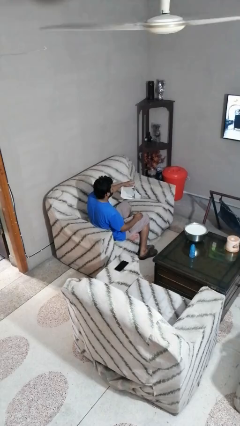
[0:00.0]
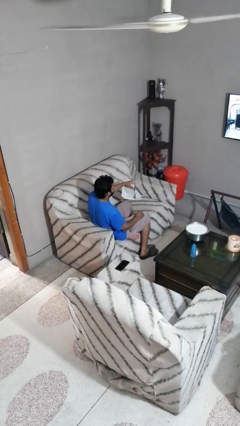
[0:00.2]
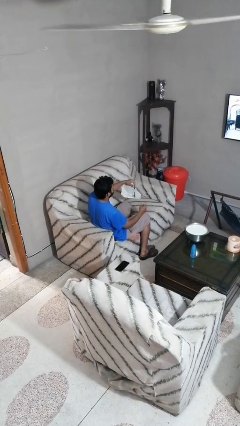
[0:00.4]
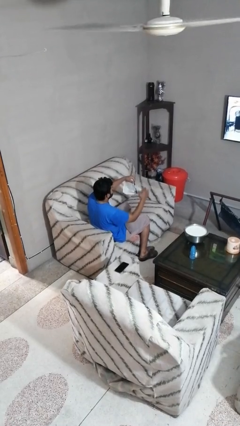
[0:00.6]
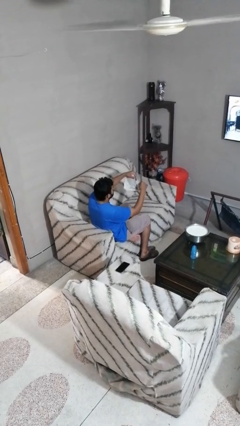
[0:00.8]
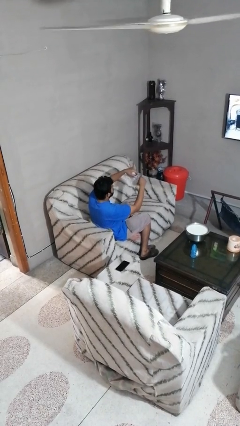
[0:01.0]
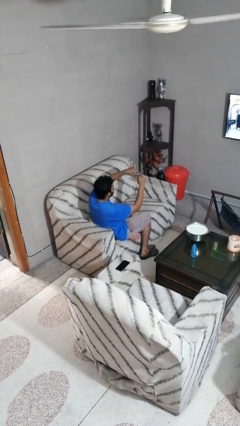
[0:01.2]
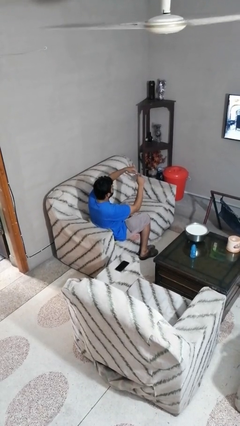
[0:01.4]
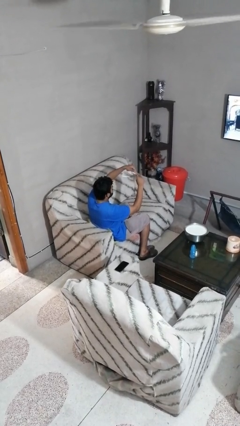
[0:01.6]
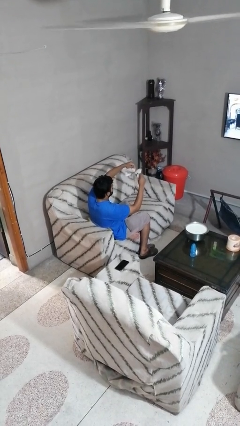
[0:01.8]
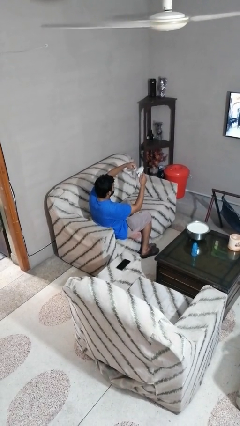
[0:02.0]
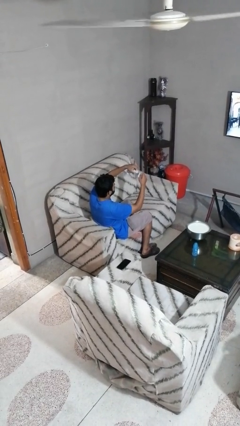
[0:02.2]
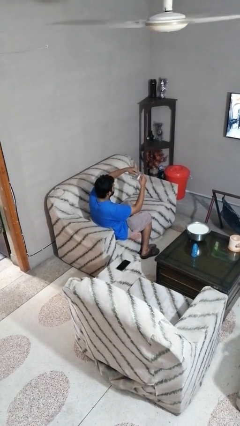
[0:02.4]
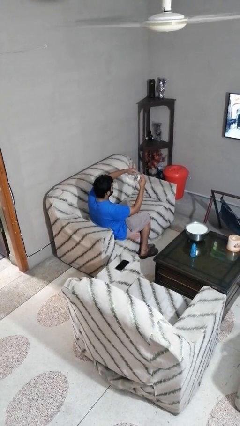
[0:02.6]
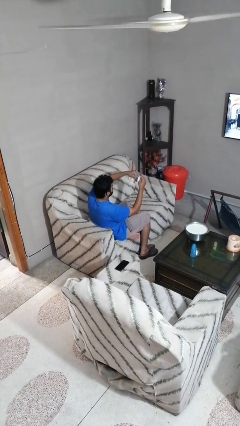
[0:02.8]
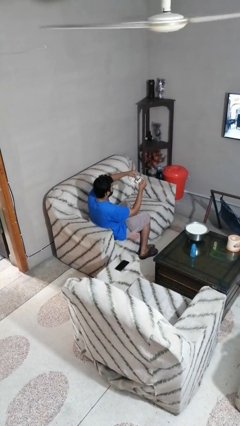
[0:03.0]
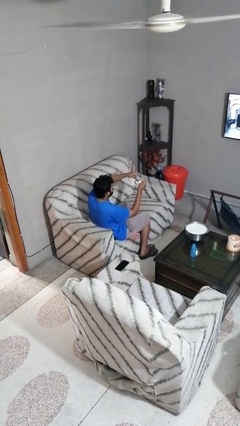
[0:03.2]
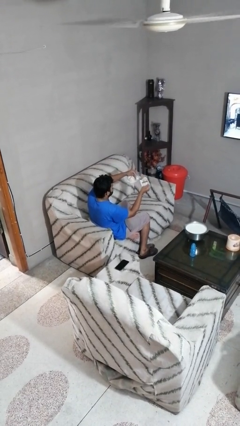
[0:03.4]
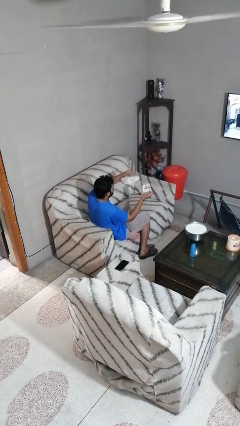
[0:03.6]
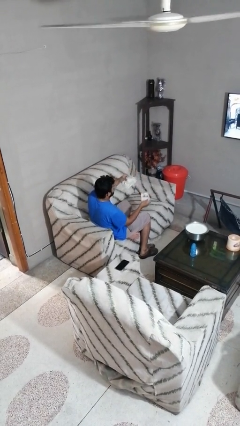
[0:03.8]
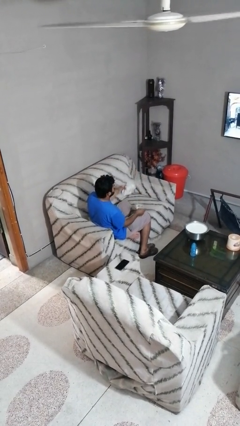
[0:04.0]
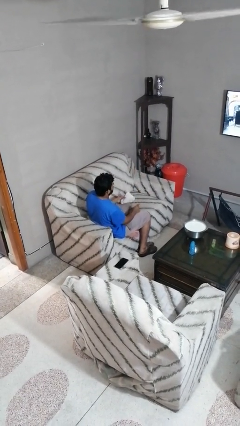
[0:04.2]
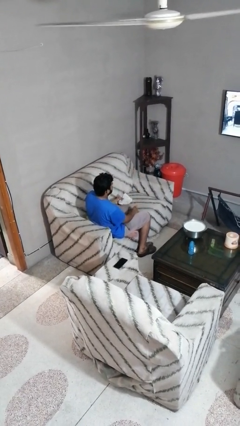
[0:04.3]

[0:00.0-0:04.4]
person tears paper

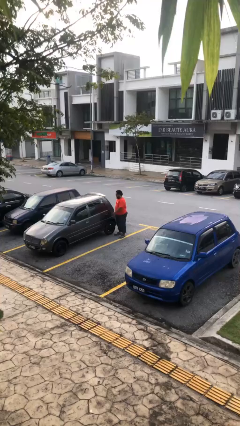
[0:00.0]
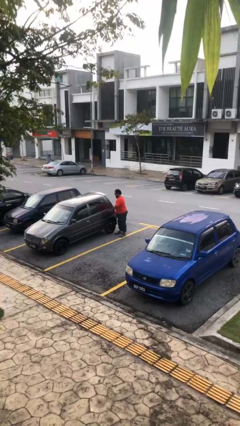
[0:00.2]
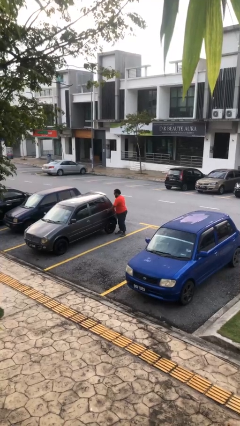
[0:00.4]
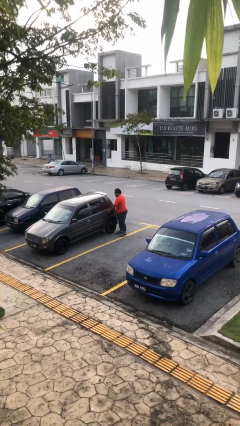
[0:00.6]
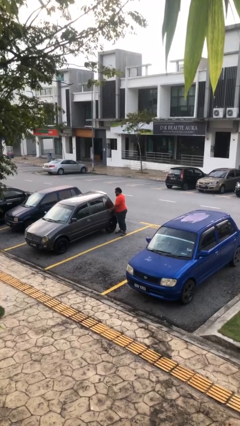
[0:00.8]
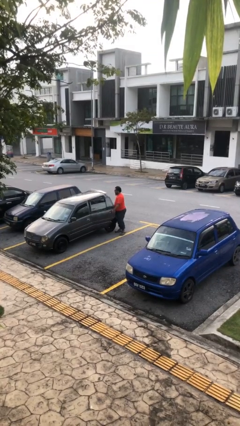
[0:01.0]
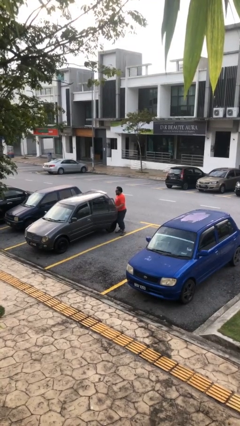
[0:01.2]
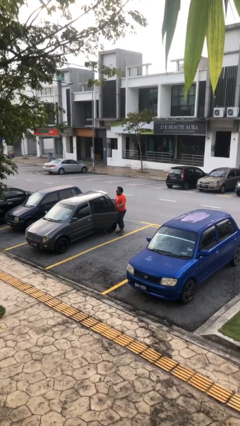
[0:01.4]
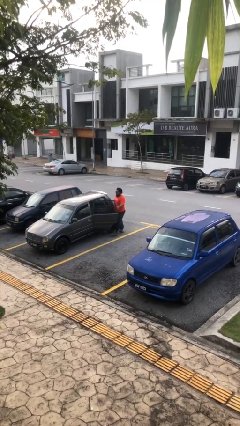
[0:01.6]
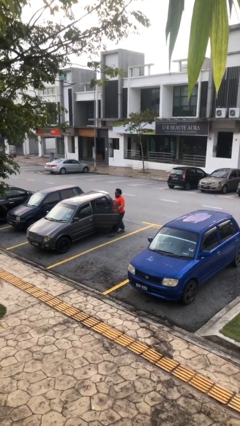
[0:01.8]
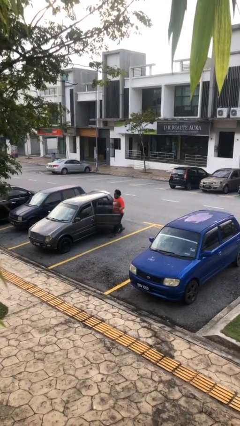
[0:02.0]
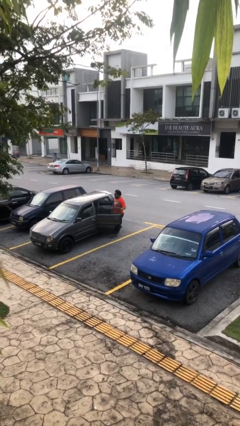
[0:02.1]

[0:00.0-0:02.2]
person opens car door

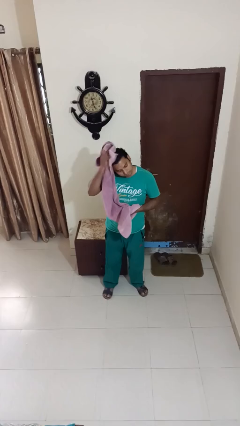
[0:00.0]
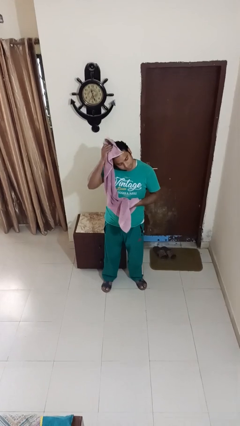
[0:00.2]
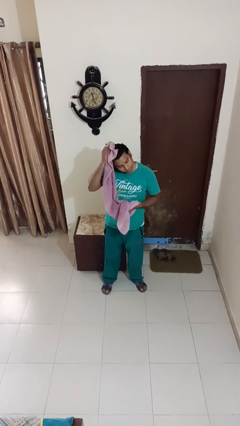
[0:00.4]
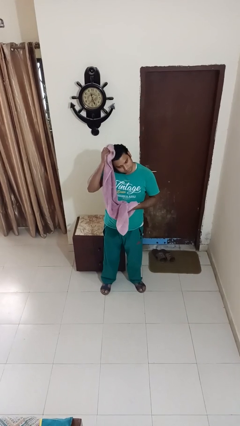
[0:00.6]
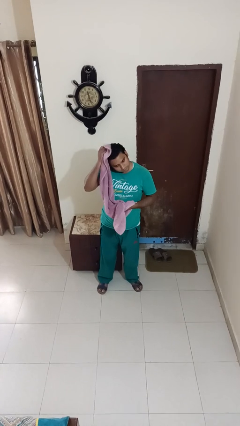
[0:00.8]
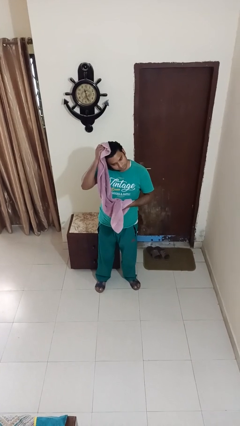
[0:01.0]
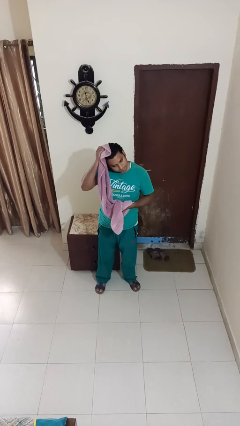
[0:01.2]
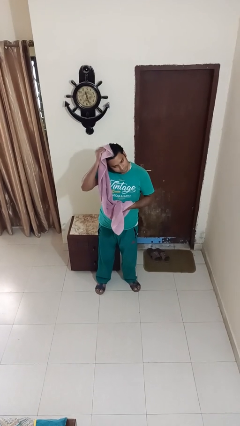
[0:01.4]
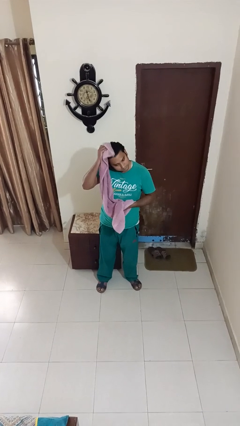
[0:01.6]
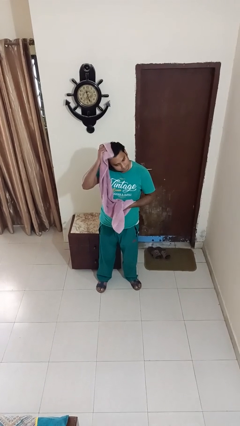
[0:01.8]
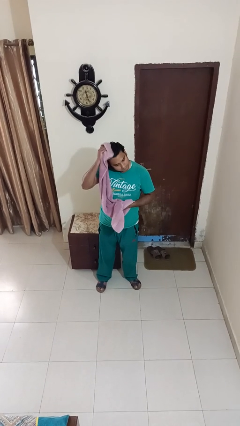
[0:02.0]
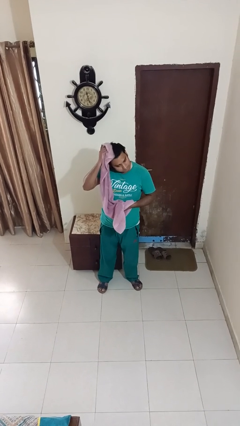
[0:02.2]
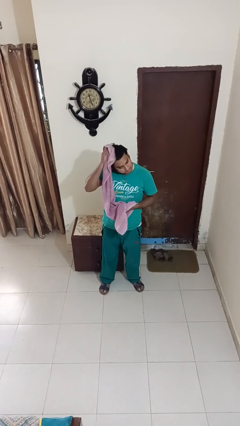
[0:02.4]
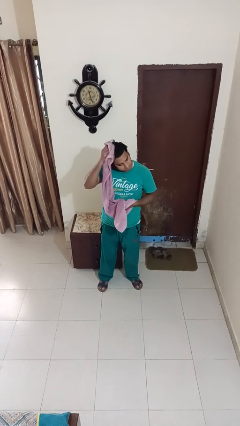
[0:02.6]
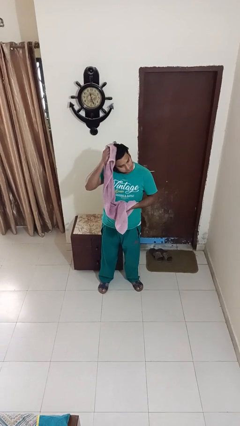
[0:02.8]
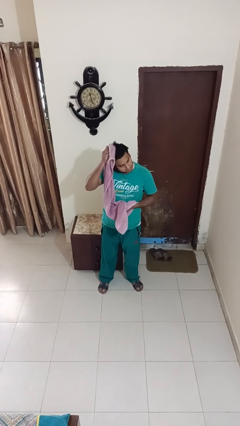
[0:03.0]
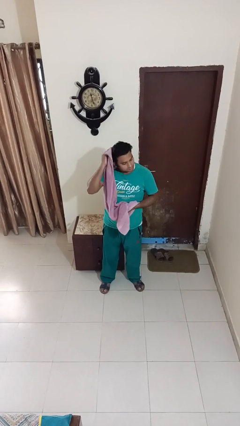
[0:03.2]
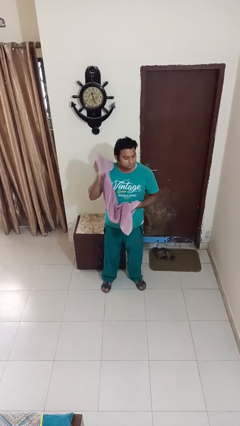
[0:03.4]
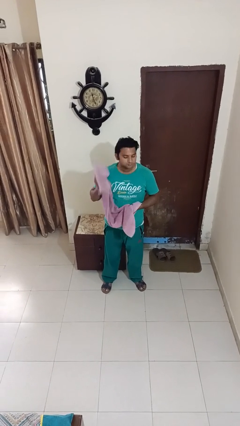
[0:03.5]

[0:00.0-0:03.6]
person dries hair with towel

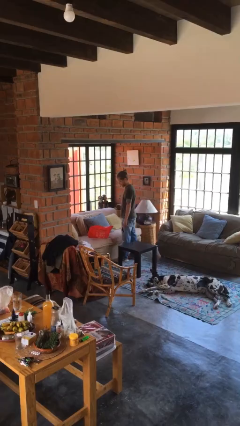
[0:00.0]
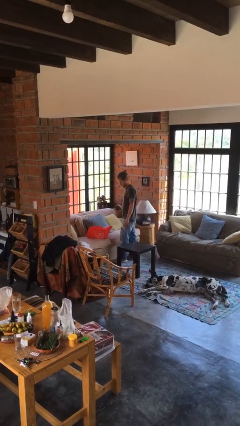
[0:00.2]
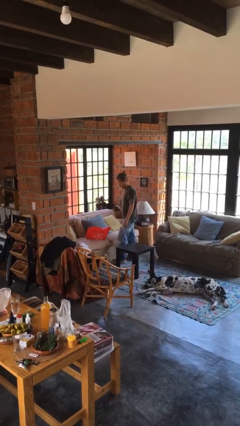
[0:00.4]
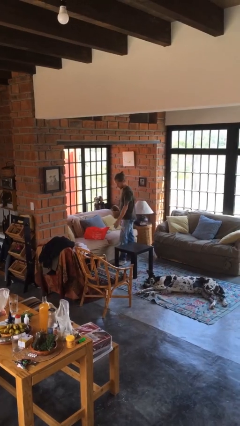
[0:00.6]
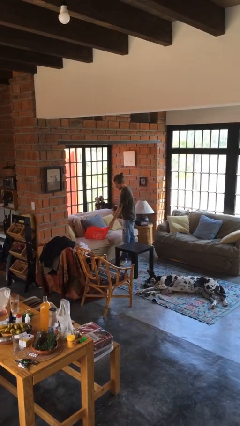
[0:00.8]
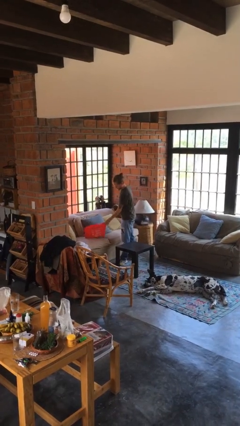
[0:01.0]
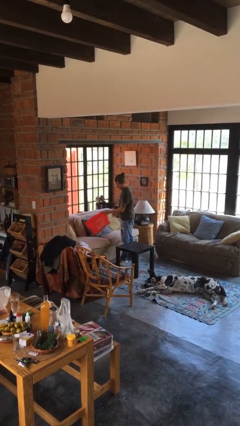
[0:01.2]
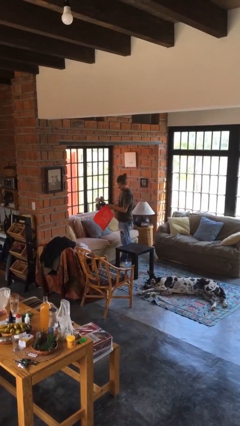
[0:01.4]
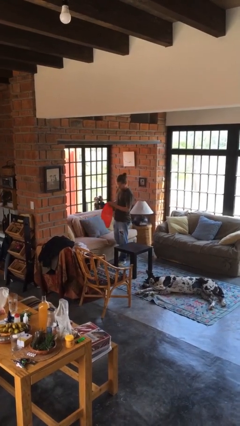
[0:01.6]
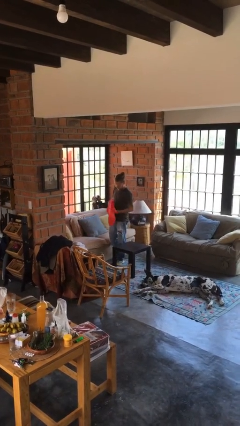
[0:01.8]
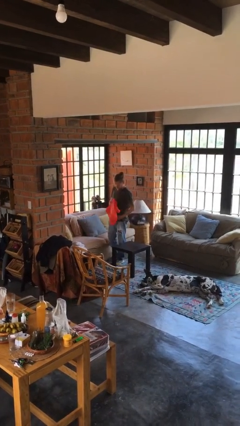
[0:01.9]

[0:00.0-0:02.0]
person picks up object from couch

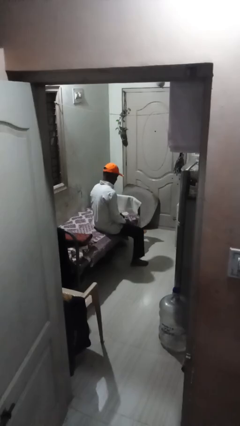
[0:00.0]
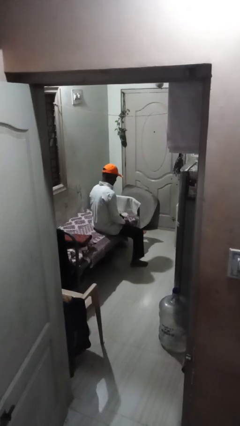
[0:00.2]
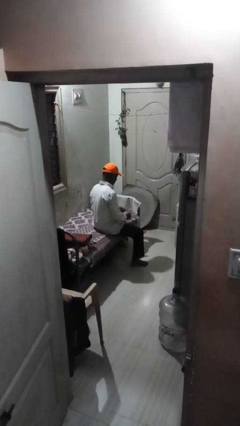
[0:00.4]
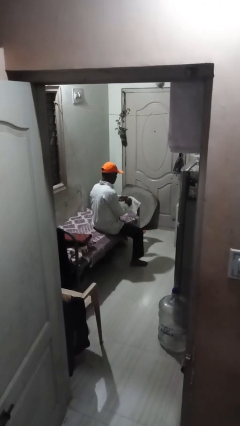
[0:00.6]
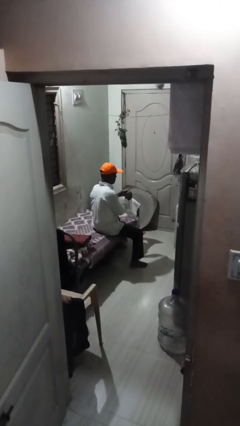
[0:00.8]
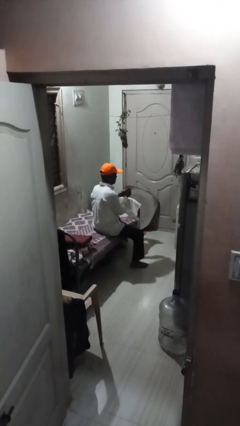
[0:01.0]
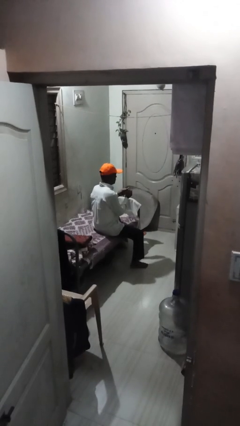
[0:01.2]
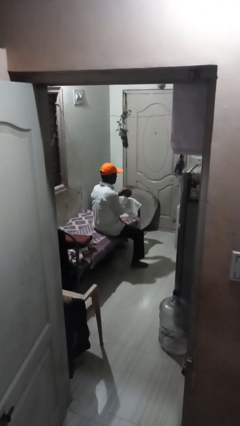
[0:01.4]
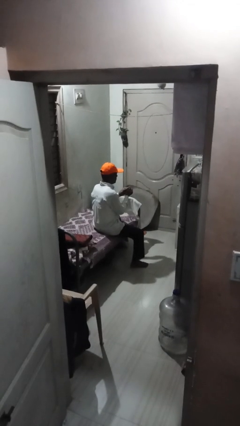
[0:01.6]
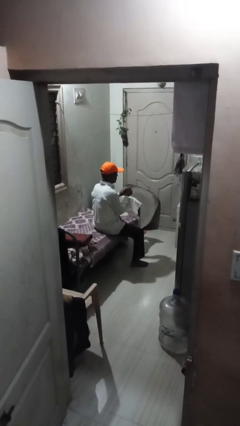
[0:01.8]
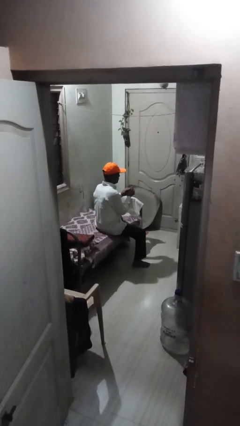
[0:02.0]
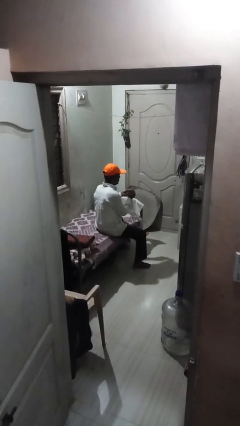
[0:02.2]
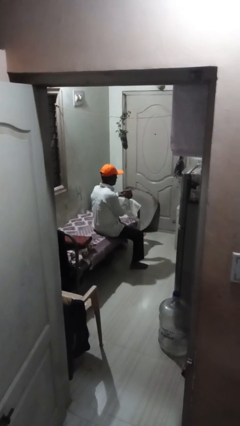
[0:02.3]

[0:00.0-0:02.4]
person files fingernails

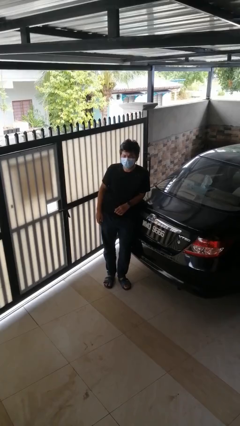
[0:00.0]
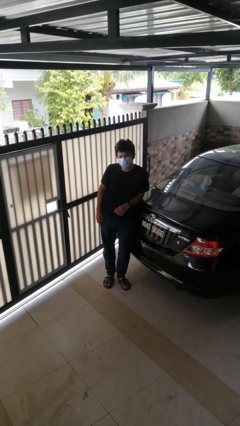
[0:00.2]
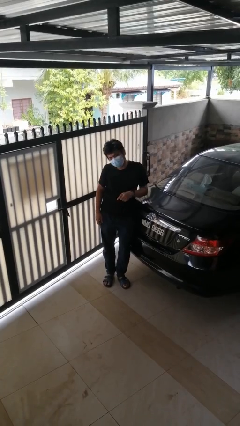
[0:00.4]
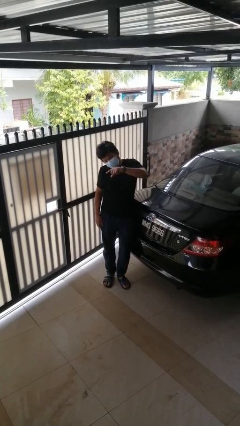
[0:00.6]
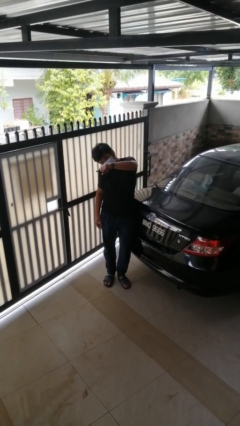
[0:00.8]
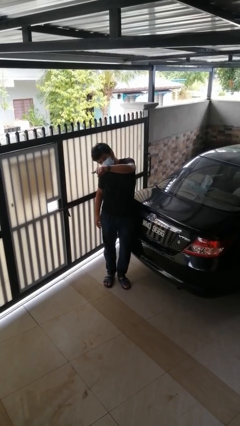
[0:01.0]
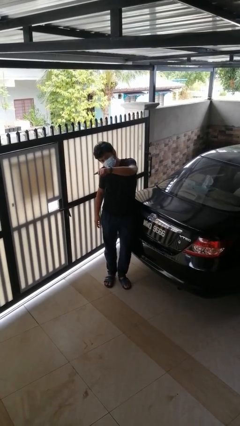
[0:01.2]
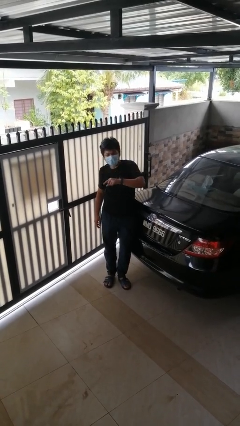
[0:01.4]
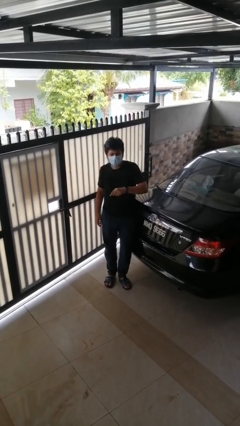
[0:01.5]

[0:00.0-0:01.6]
person points at person

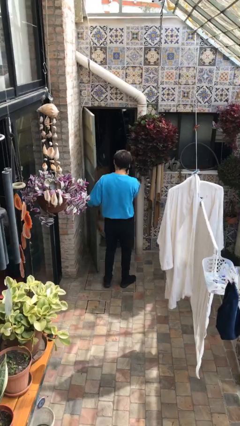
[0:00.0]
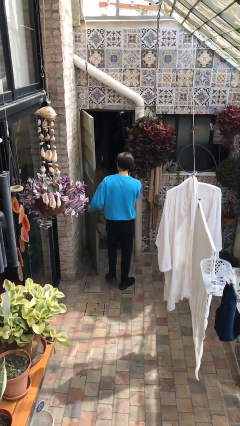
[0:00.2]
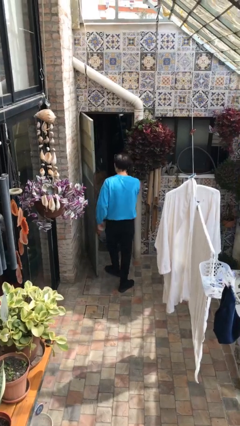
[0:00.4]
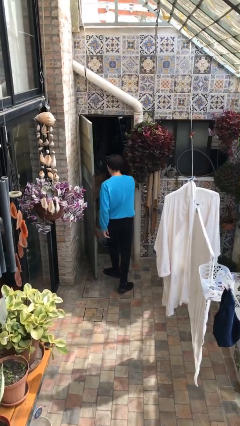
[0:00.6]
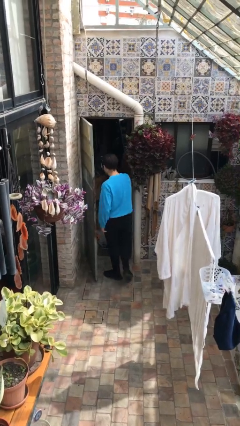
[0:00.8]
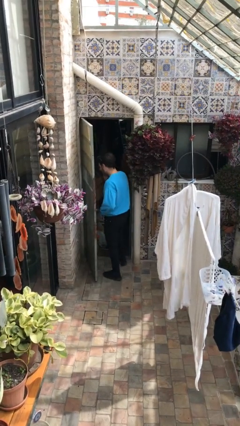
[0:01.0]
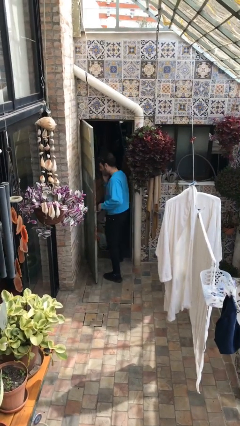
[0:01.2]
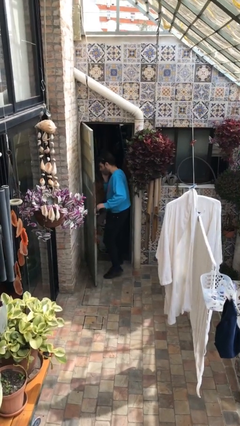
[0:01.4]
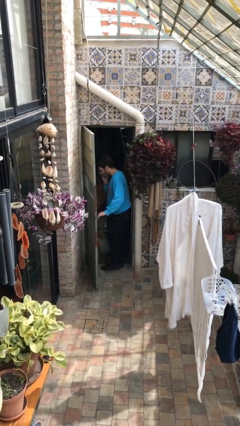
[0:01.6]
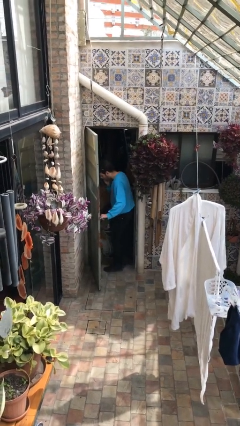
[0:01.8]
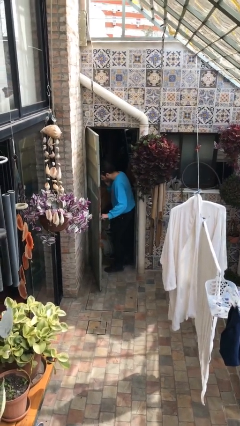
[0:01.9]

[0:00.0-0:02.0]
person exits scene through structure
